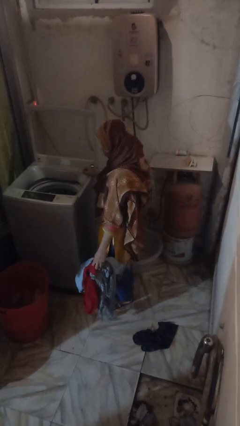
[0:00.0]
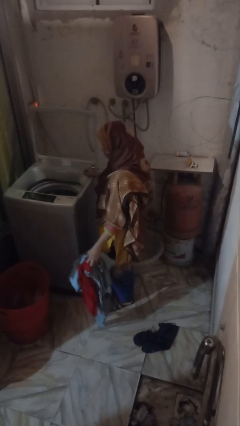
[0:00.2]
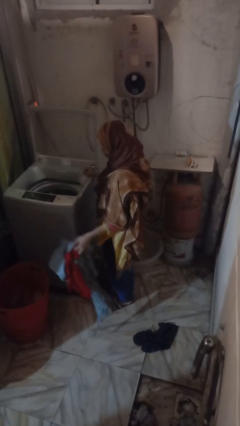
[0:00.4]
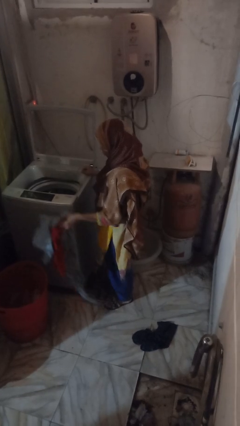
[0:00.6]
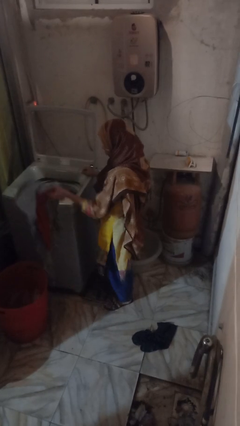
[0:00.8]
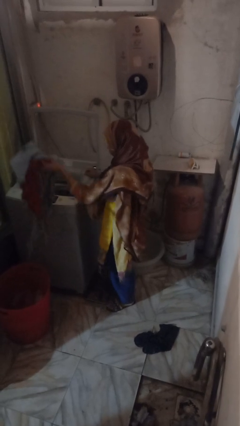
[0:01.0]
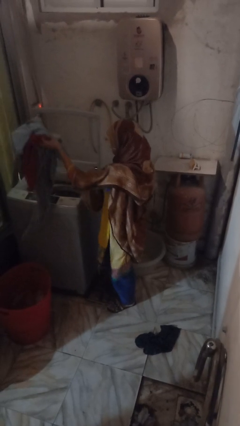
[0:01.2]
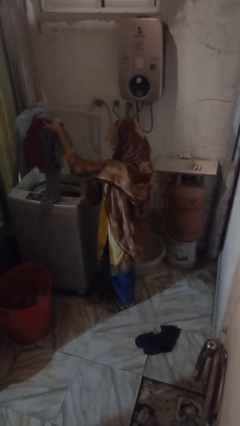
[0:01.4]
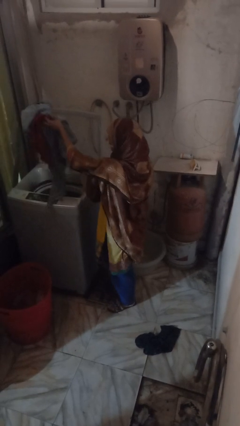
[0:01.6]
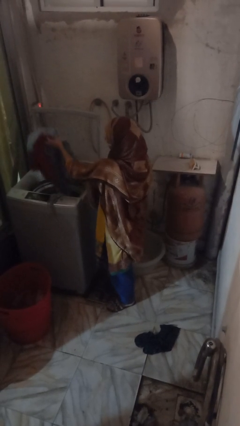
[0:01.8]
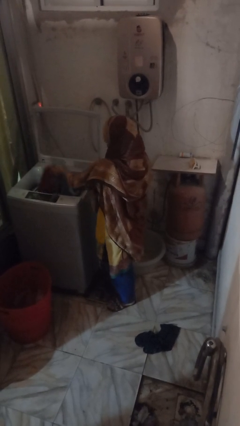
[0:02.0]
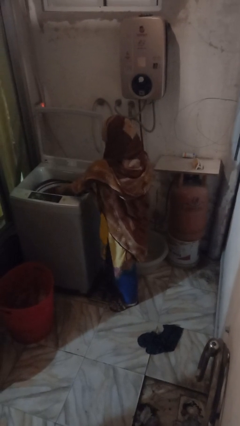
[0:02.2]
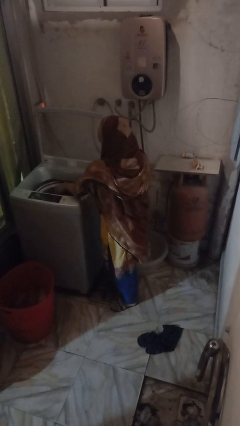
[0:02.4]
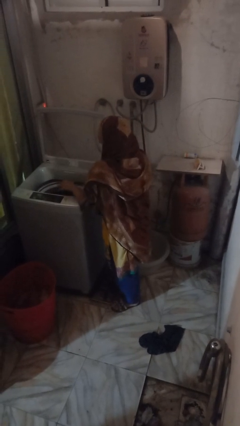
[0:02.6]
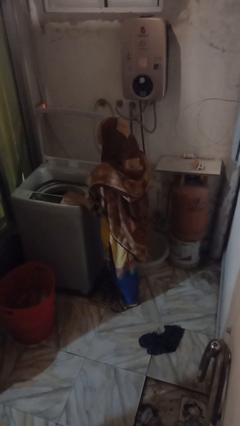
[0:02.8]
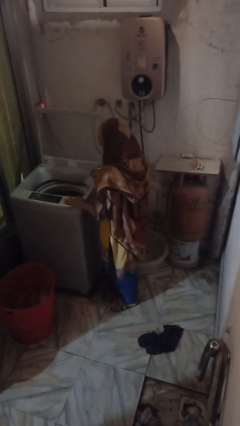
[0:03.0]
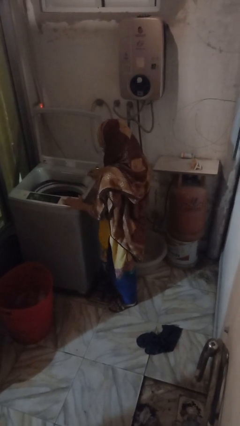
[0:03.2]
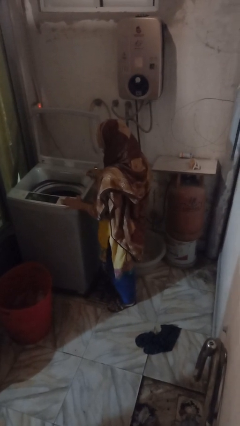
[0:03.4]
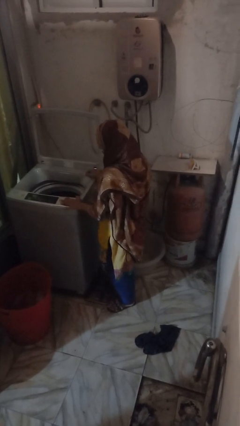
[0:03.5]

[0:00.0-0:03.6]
person loads clotheswasher

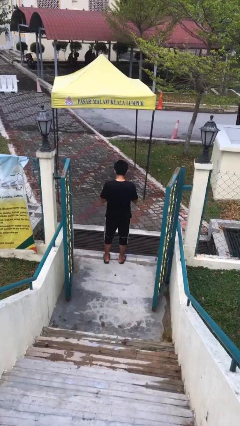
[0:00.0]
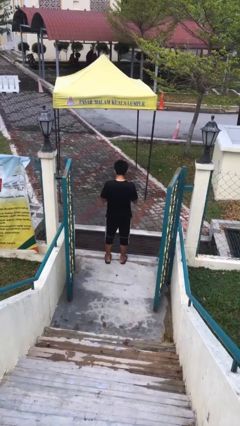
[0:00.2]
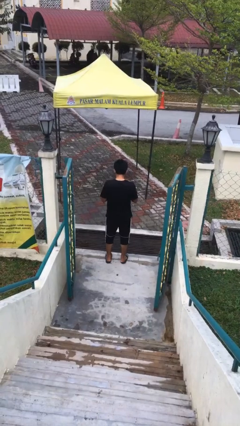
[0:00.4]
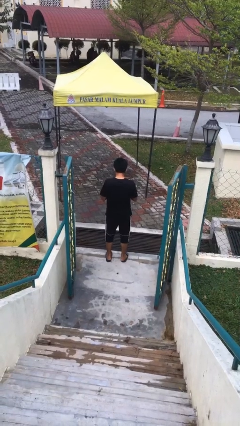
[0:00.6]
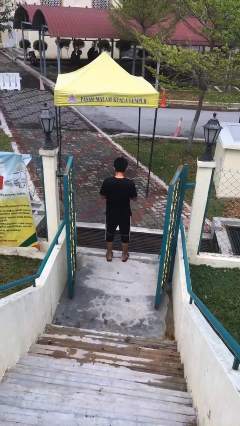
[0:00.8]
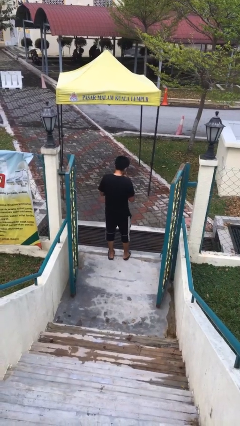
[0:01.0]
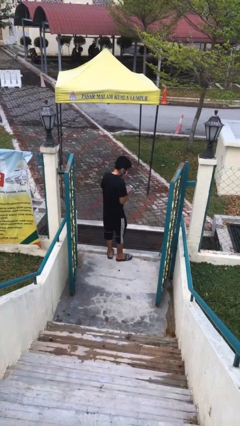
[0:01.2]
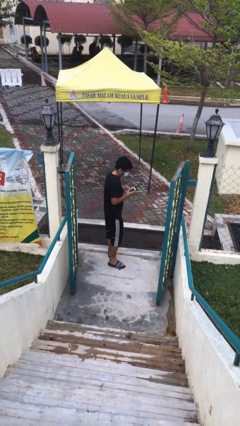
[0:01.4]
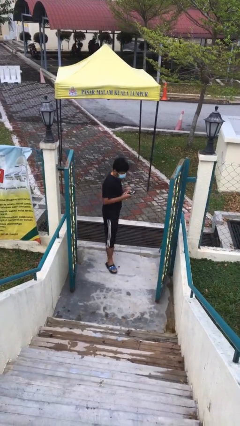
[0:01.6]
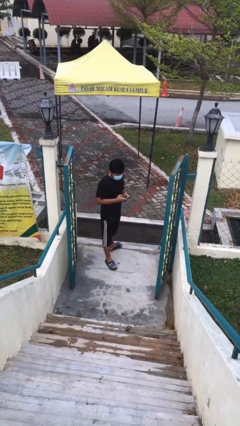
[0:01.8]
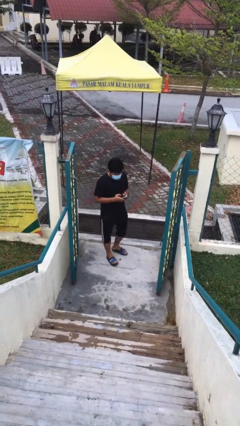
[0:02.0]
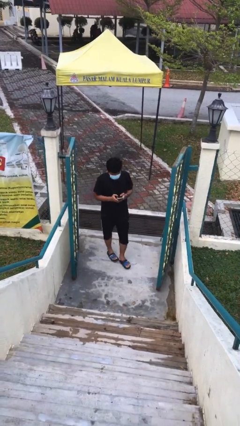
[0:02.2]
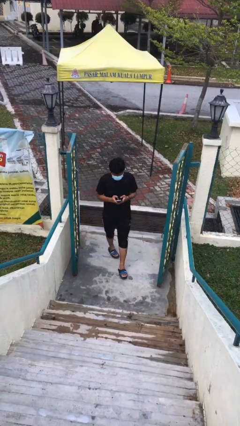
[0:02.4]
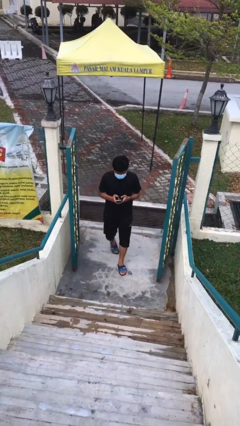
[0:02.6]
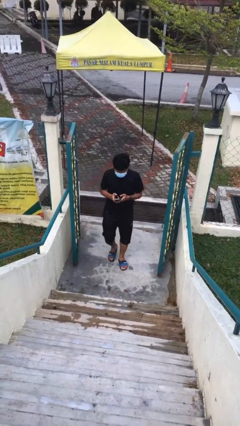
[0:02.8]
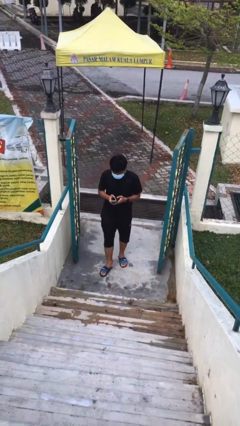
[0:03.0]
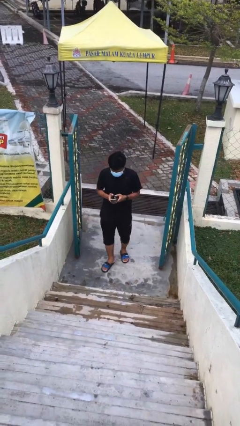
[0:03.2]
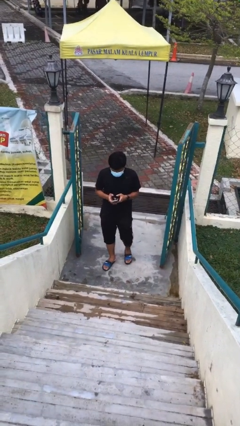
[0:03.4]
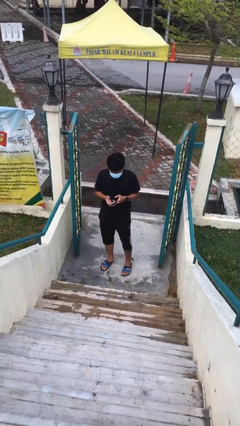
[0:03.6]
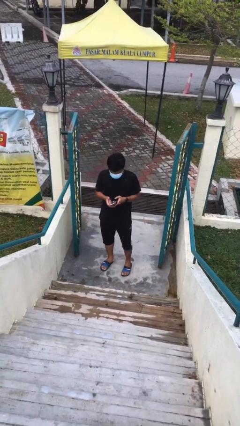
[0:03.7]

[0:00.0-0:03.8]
person enters scene through structure

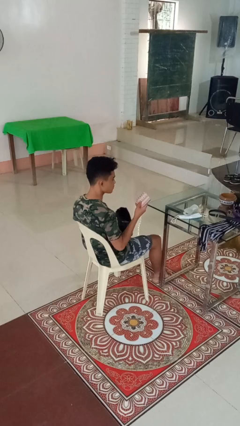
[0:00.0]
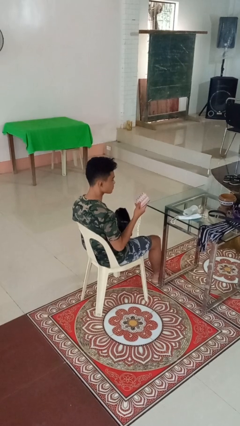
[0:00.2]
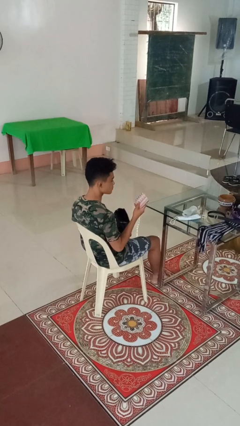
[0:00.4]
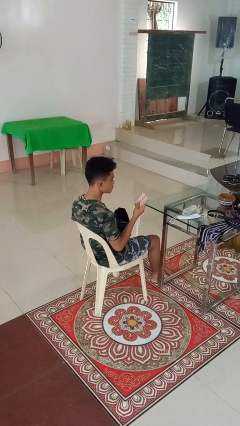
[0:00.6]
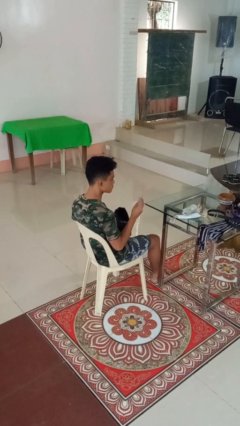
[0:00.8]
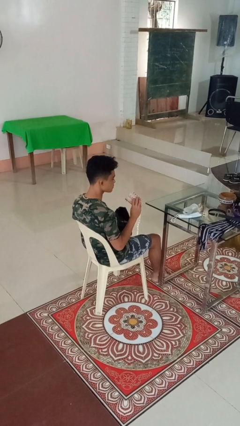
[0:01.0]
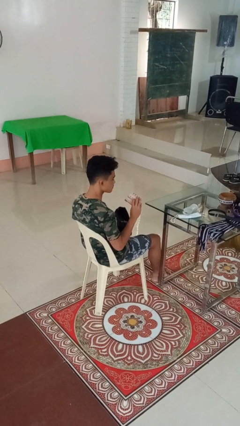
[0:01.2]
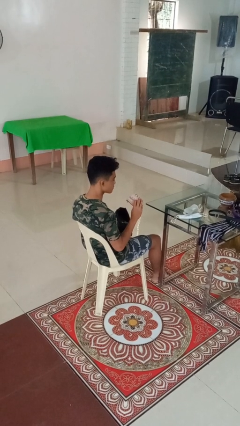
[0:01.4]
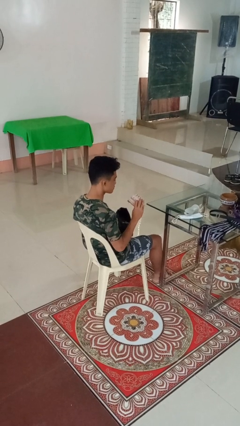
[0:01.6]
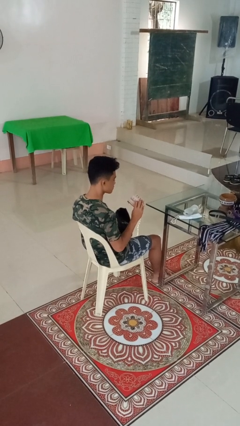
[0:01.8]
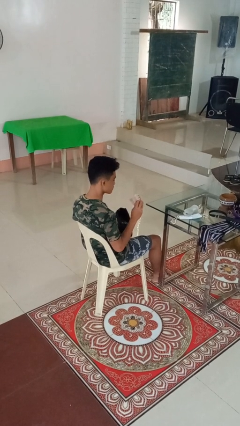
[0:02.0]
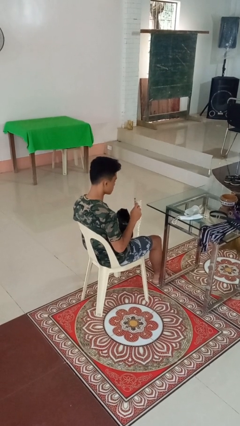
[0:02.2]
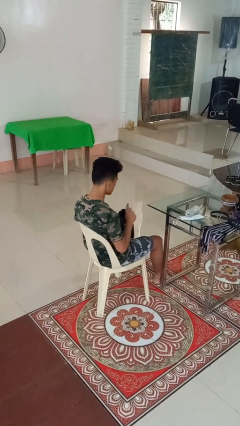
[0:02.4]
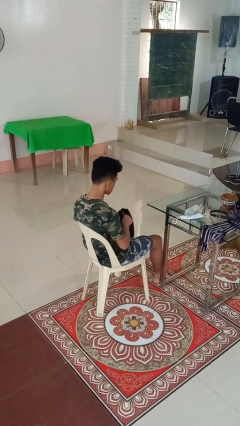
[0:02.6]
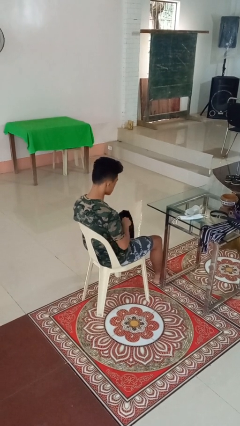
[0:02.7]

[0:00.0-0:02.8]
person takes object from purse

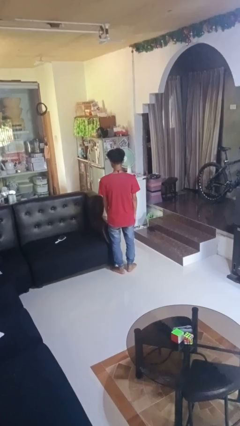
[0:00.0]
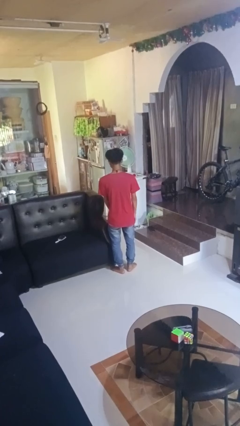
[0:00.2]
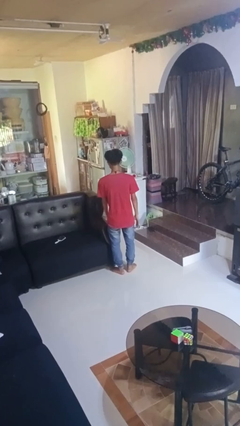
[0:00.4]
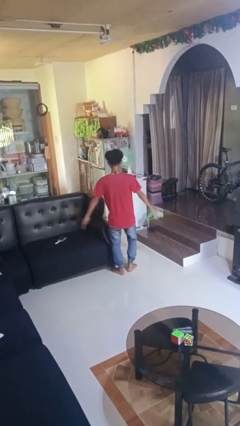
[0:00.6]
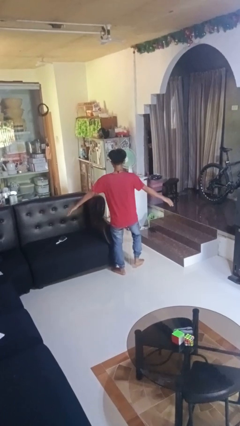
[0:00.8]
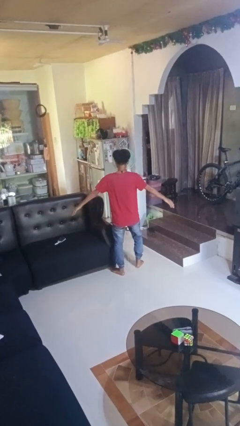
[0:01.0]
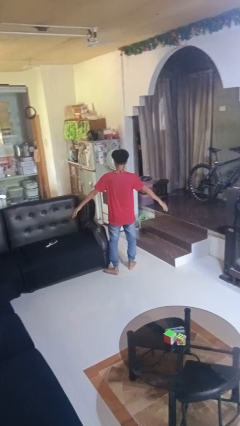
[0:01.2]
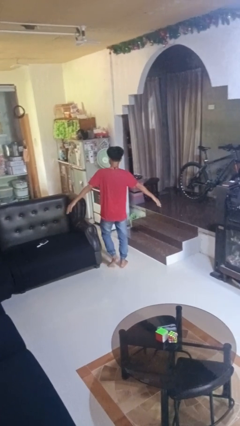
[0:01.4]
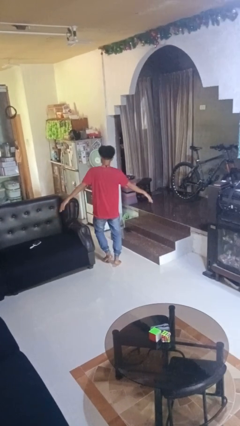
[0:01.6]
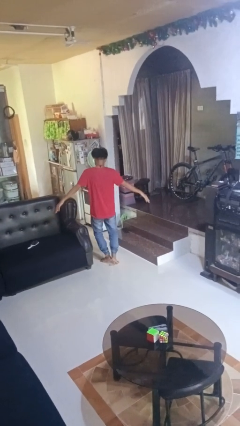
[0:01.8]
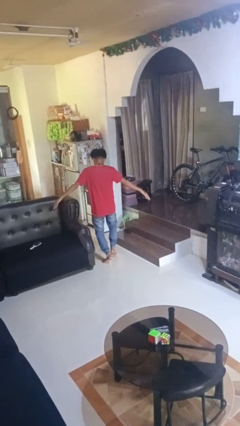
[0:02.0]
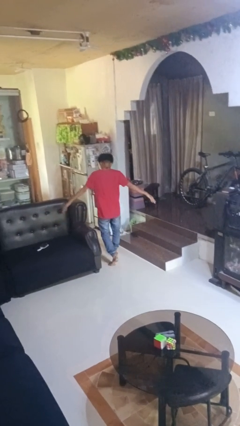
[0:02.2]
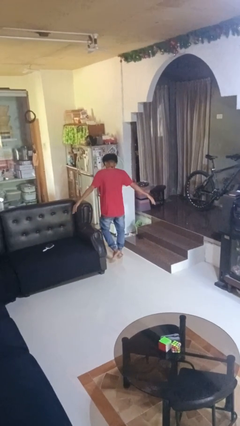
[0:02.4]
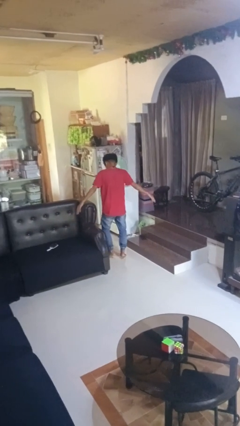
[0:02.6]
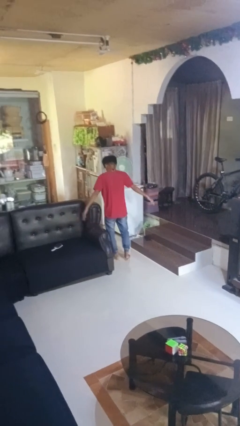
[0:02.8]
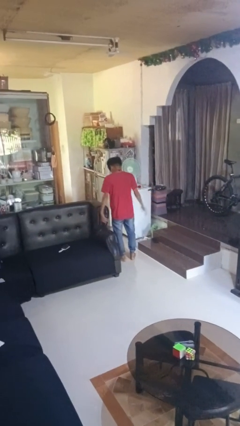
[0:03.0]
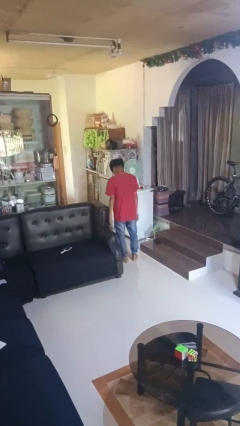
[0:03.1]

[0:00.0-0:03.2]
person walks tiptoe

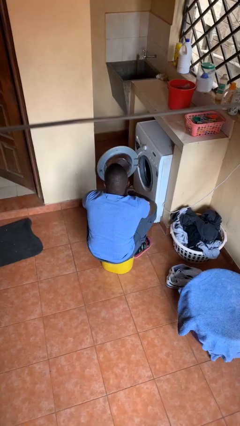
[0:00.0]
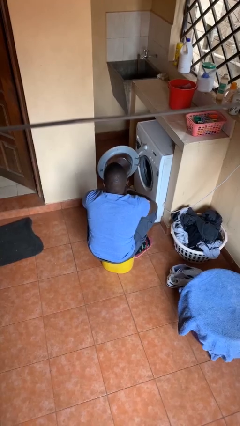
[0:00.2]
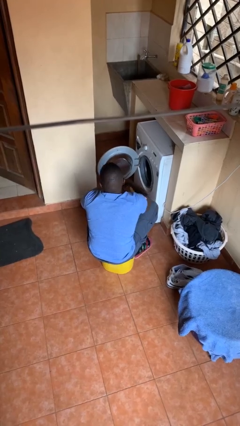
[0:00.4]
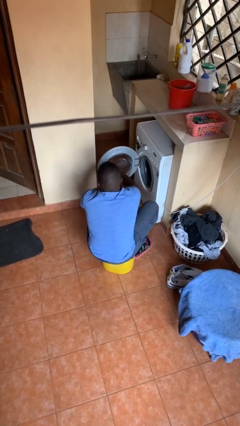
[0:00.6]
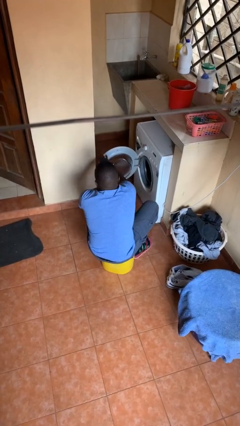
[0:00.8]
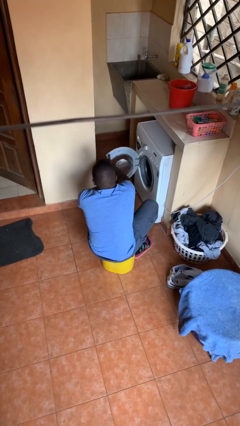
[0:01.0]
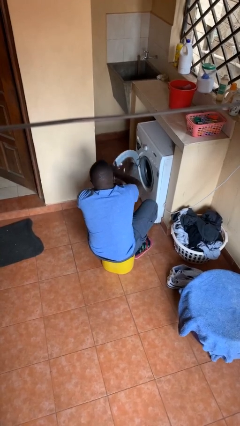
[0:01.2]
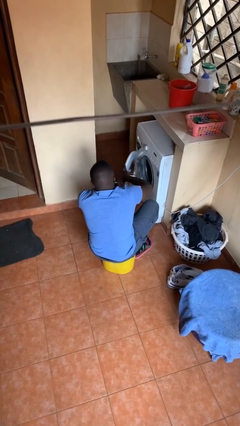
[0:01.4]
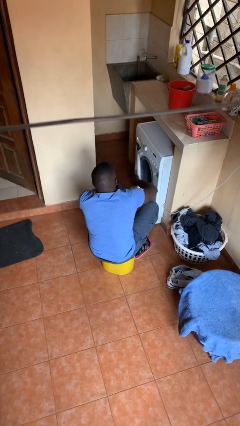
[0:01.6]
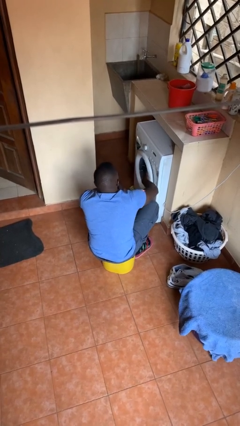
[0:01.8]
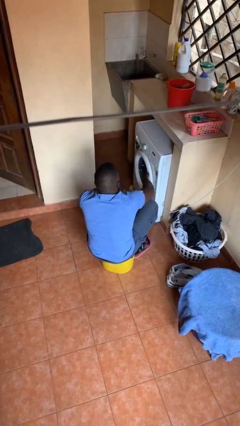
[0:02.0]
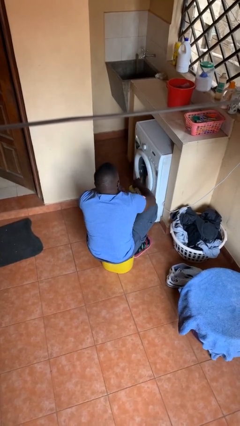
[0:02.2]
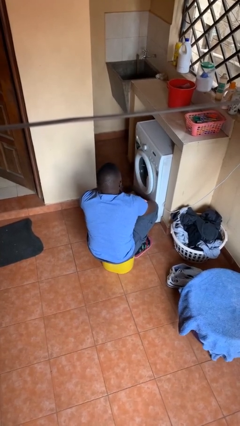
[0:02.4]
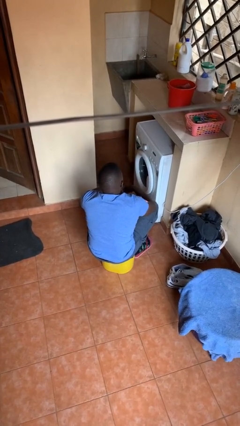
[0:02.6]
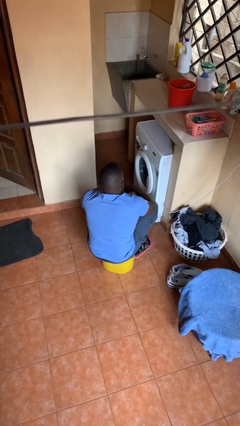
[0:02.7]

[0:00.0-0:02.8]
person closes clothes washer

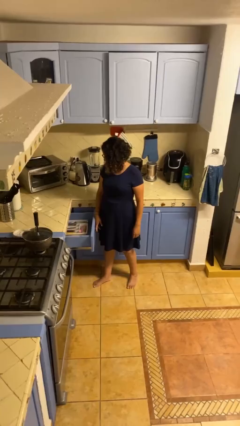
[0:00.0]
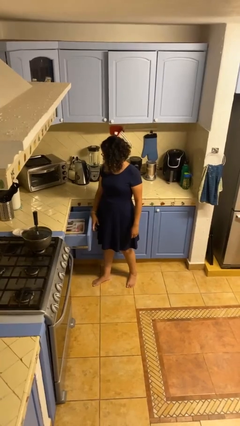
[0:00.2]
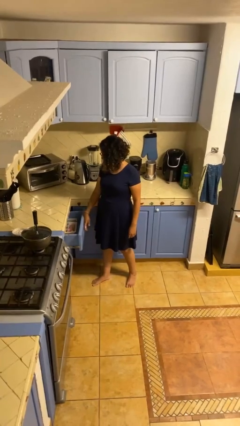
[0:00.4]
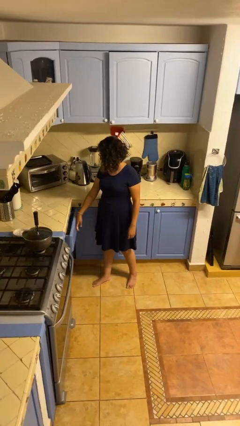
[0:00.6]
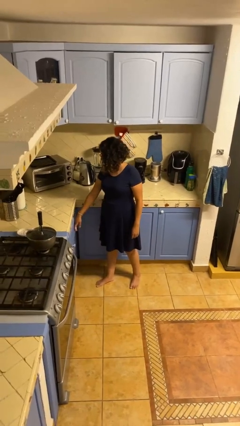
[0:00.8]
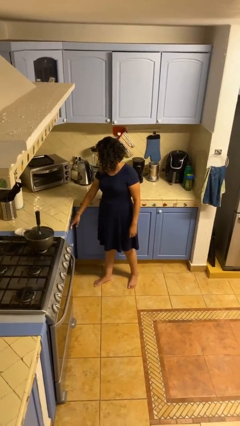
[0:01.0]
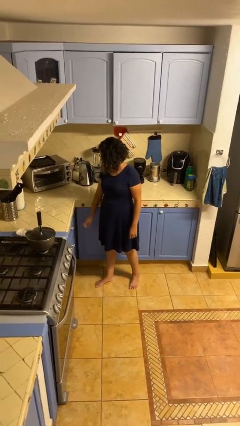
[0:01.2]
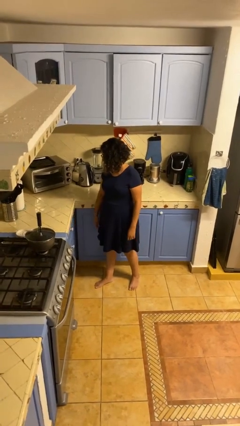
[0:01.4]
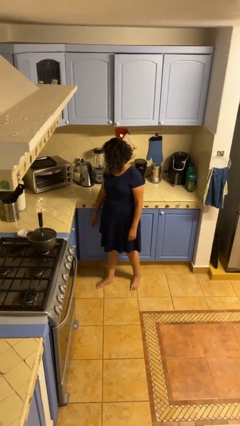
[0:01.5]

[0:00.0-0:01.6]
person closes kitchen drawer
